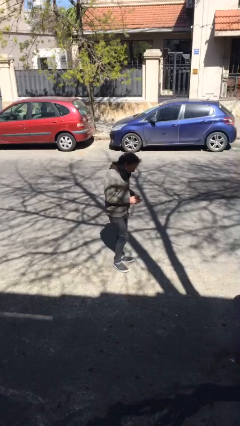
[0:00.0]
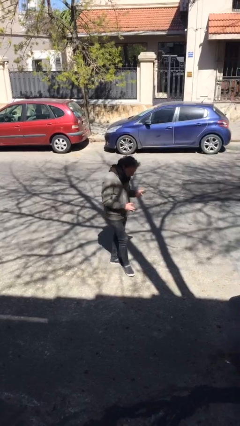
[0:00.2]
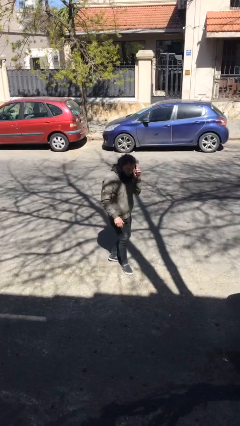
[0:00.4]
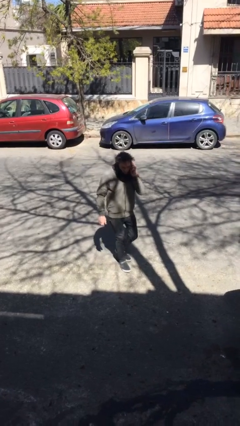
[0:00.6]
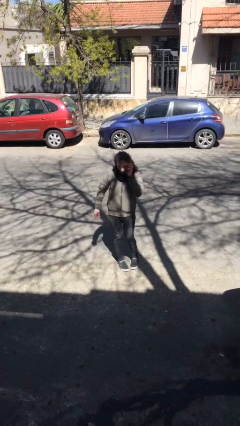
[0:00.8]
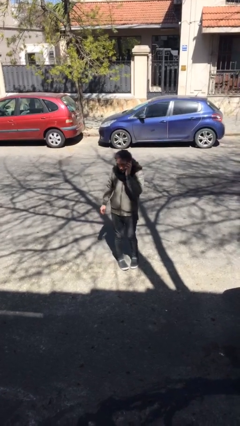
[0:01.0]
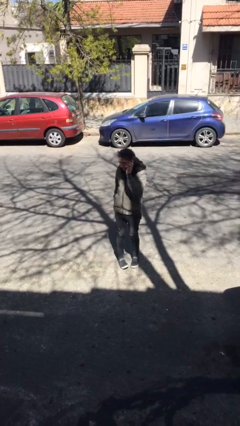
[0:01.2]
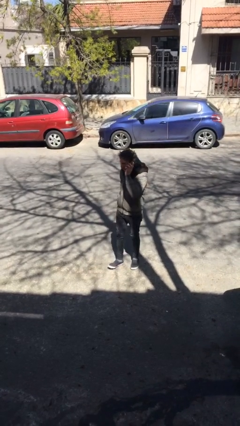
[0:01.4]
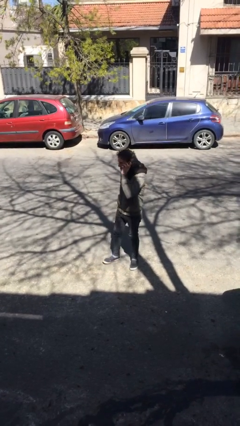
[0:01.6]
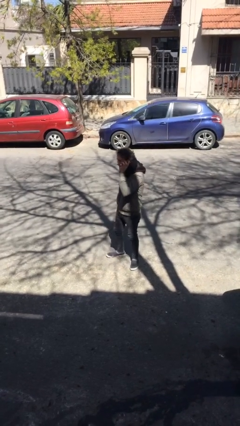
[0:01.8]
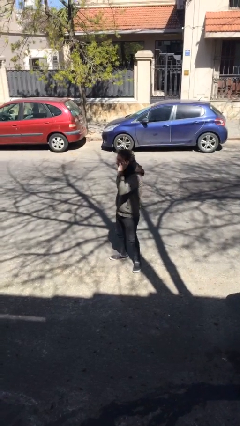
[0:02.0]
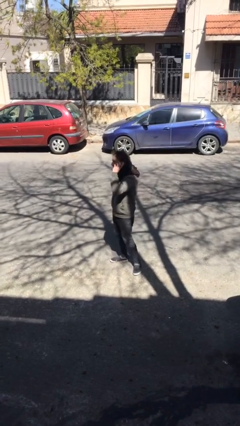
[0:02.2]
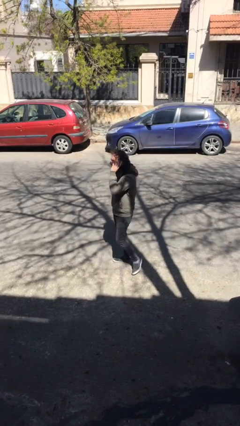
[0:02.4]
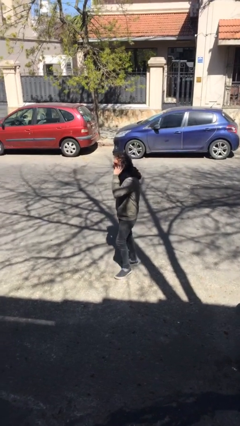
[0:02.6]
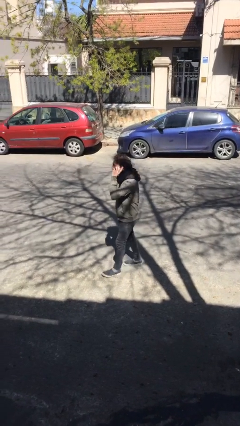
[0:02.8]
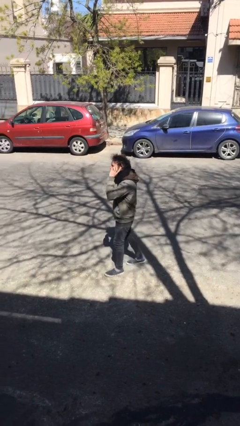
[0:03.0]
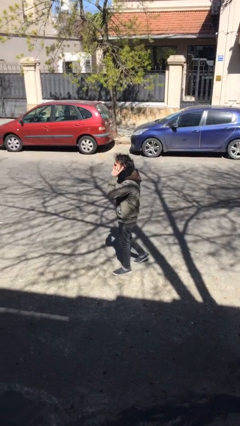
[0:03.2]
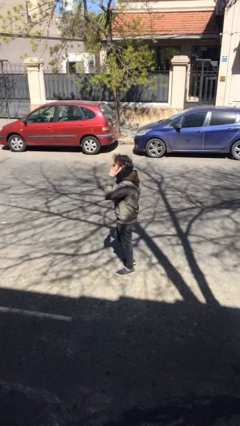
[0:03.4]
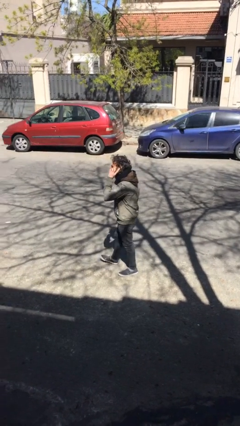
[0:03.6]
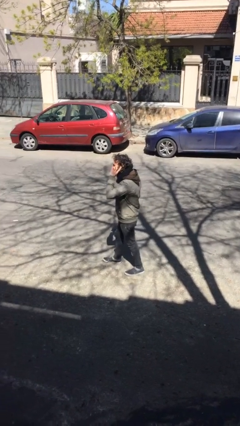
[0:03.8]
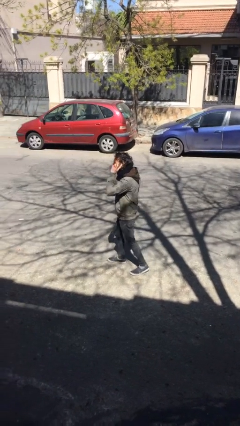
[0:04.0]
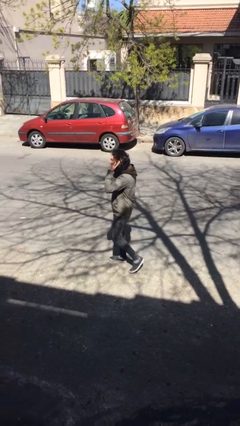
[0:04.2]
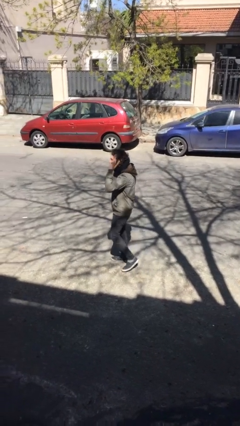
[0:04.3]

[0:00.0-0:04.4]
person talks on phone

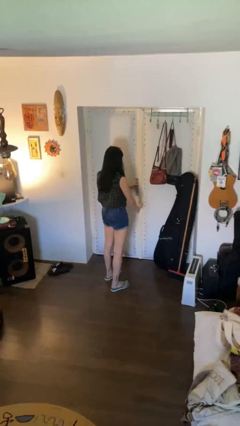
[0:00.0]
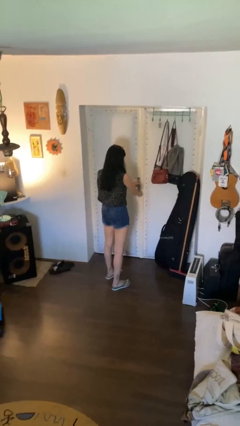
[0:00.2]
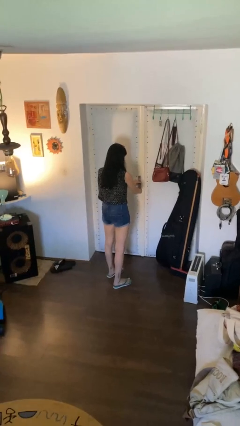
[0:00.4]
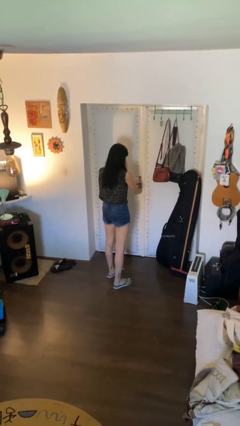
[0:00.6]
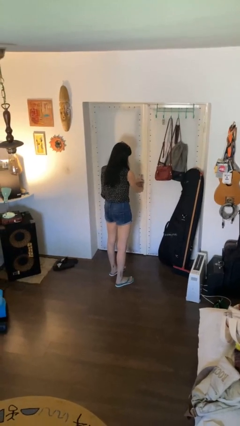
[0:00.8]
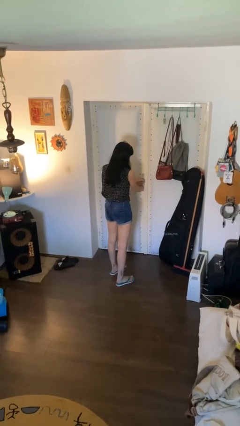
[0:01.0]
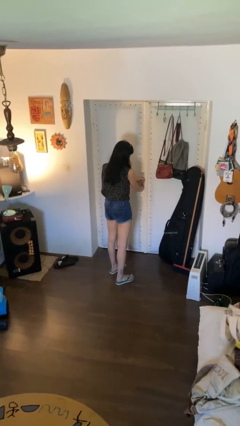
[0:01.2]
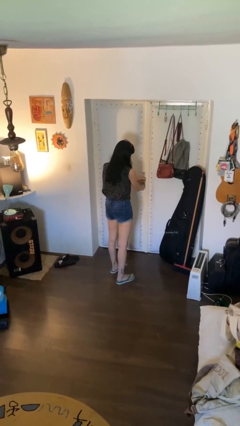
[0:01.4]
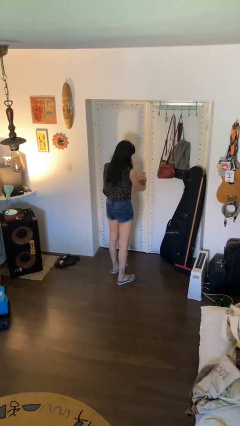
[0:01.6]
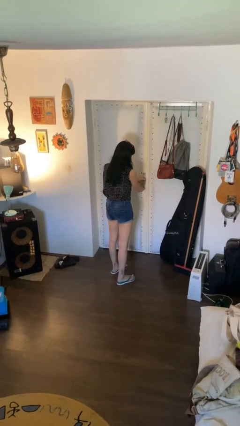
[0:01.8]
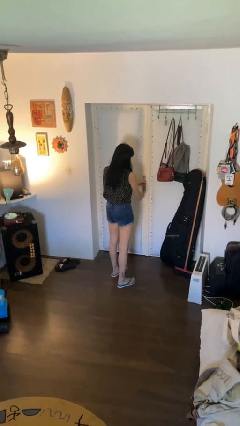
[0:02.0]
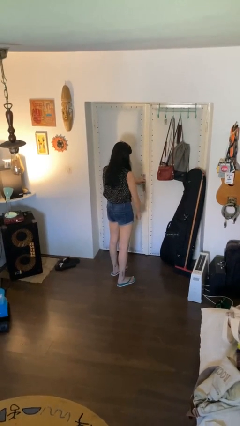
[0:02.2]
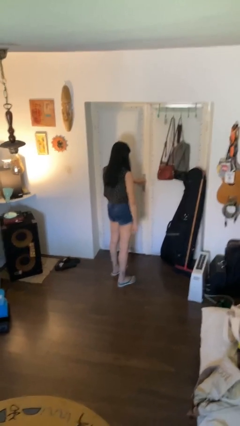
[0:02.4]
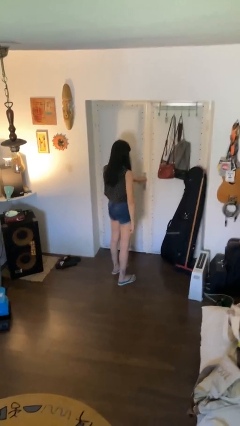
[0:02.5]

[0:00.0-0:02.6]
person locks door with keys

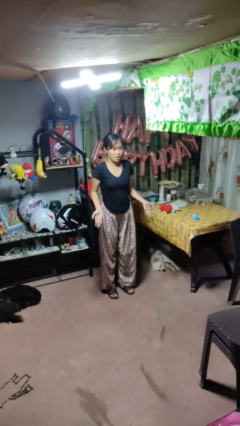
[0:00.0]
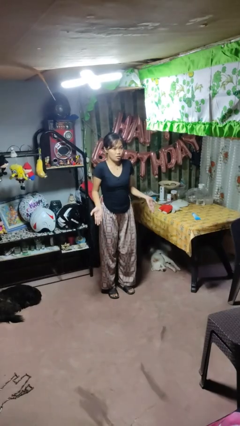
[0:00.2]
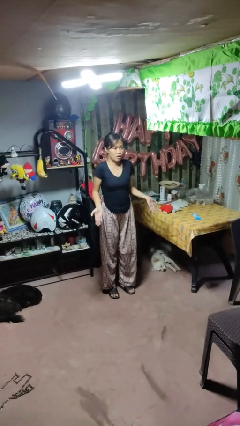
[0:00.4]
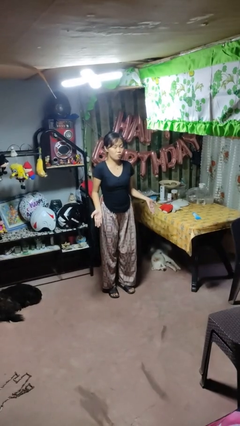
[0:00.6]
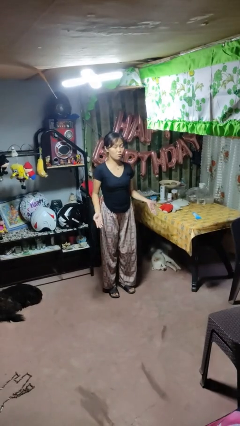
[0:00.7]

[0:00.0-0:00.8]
person shrugs

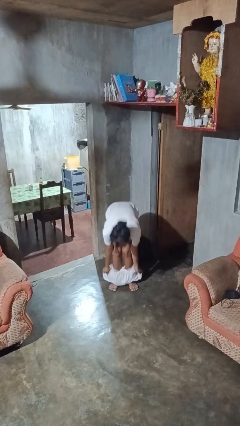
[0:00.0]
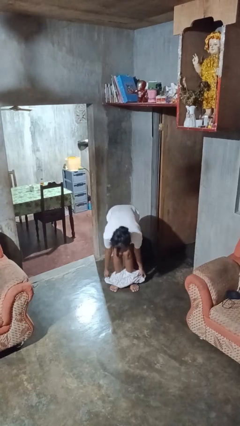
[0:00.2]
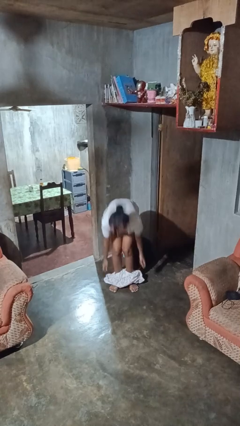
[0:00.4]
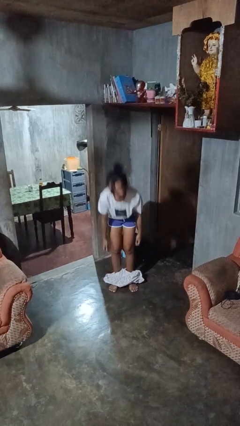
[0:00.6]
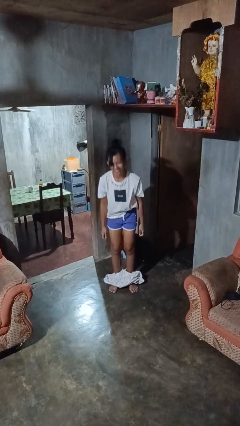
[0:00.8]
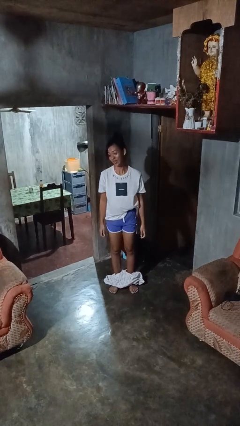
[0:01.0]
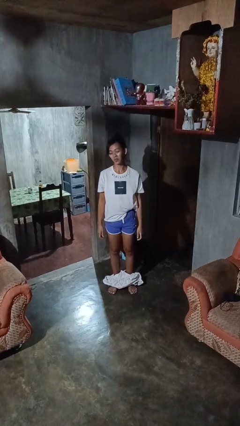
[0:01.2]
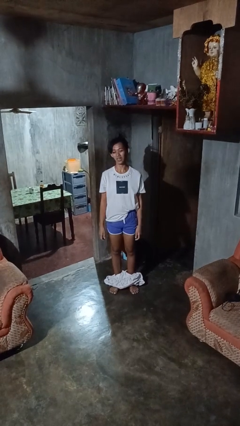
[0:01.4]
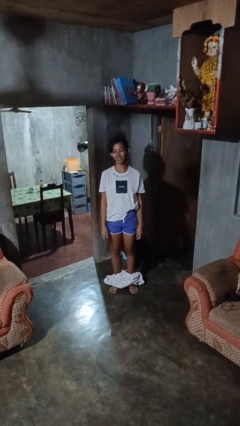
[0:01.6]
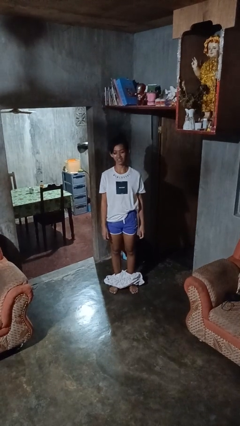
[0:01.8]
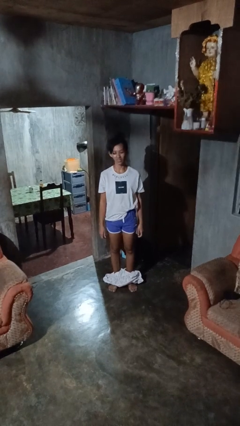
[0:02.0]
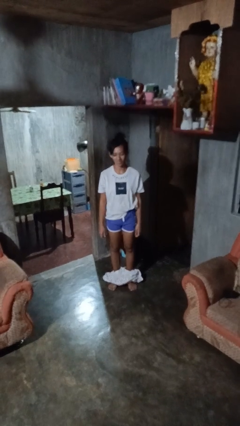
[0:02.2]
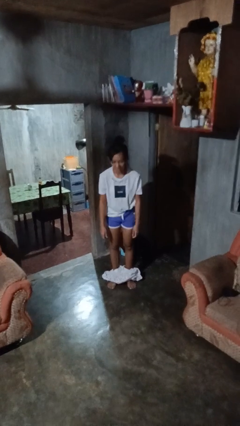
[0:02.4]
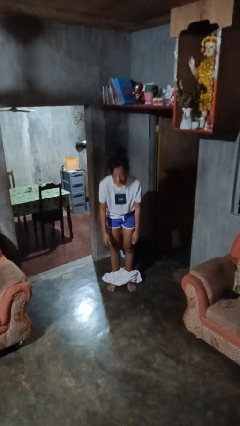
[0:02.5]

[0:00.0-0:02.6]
person takes off pants

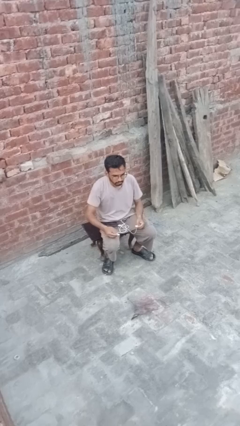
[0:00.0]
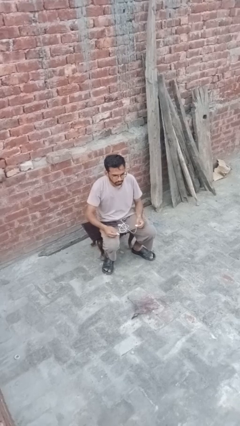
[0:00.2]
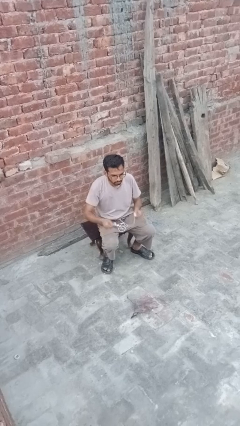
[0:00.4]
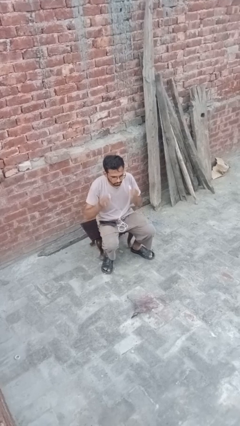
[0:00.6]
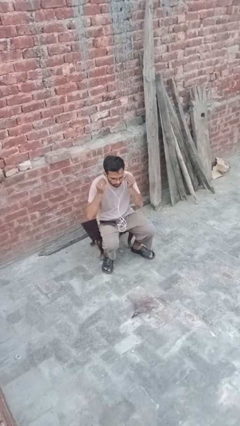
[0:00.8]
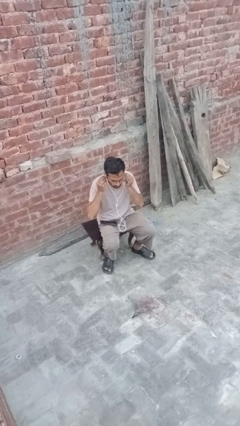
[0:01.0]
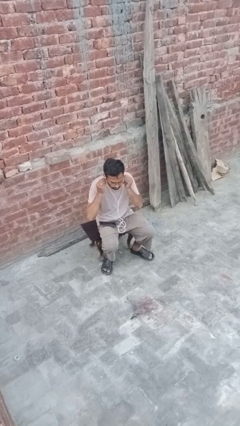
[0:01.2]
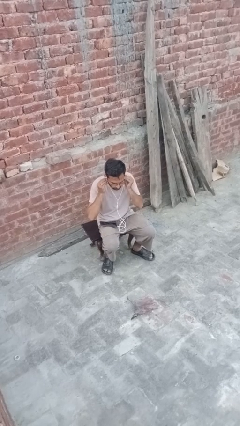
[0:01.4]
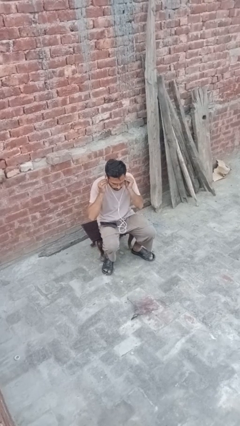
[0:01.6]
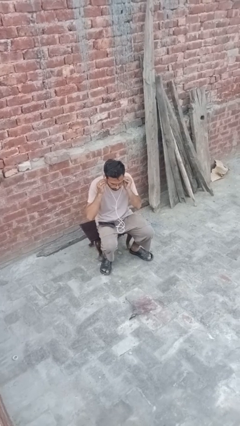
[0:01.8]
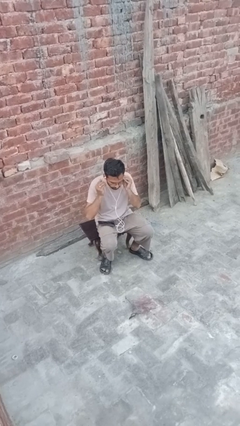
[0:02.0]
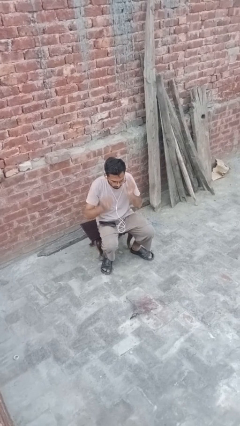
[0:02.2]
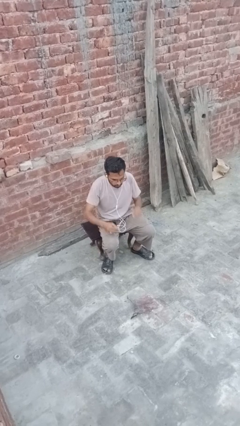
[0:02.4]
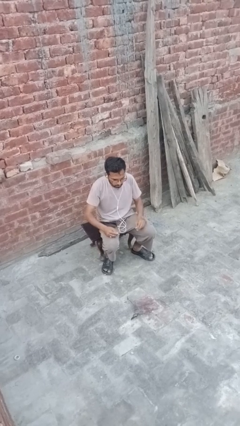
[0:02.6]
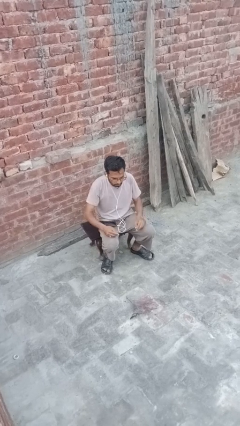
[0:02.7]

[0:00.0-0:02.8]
person puts on headphones

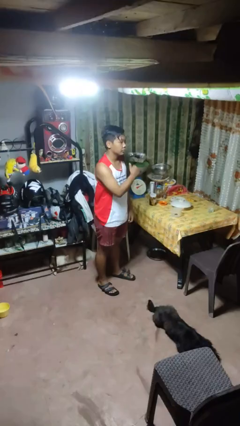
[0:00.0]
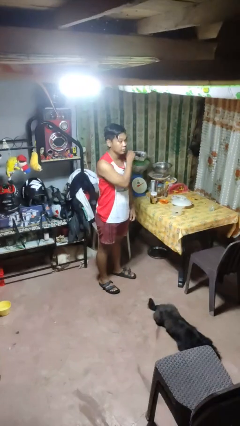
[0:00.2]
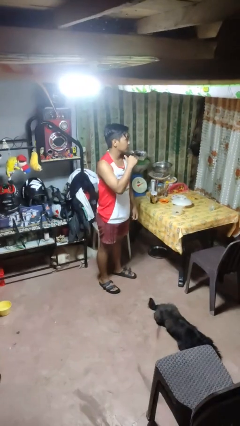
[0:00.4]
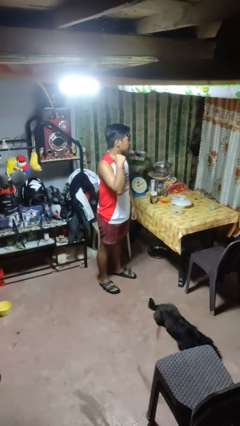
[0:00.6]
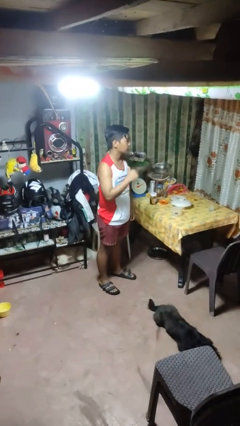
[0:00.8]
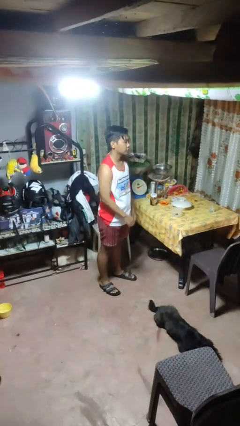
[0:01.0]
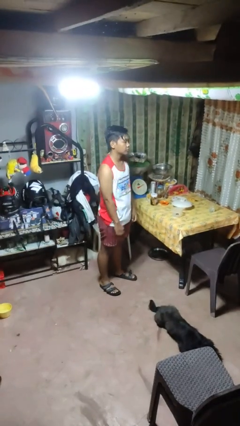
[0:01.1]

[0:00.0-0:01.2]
person gestures cut

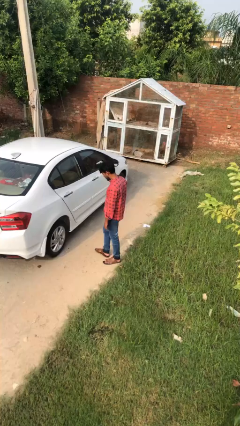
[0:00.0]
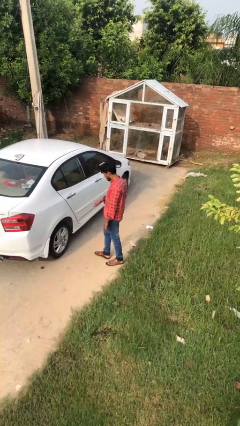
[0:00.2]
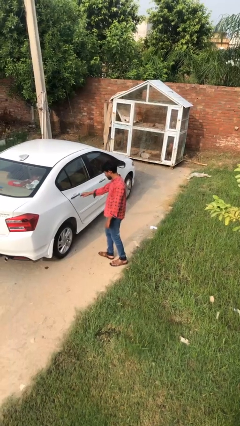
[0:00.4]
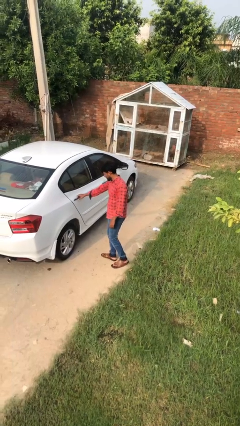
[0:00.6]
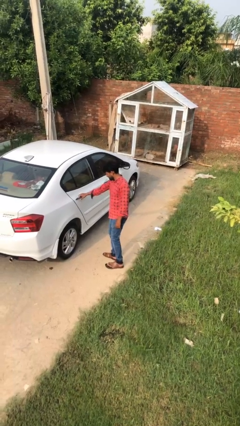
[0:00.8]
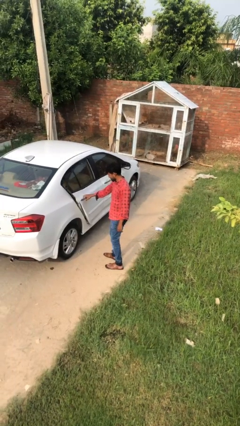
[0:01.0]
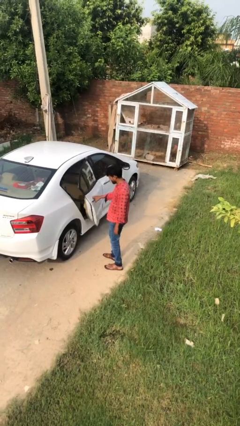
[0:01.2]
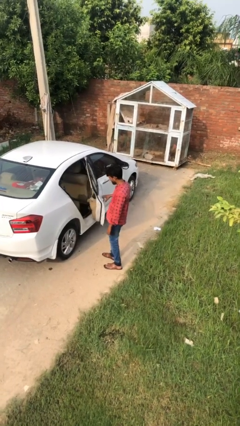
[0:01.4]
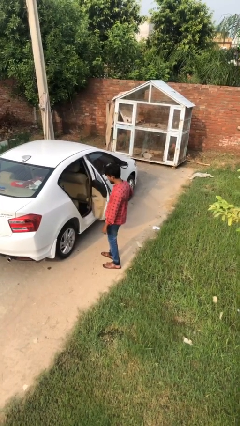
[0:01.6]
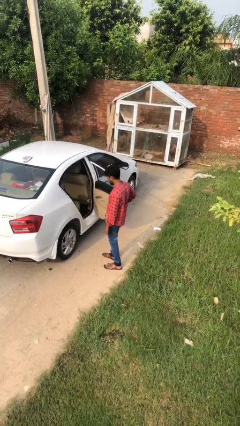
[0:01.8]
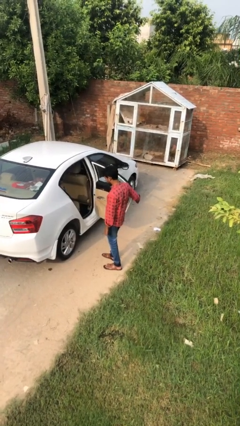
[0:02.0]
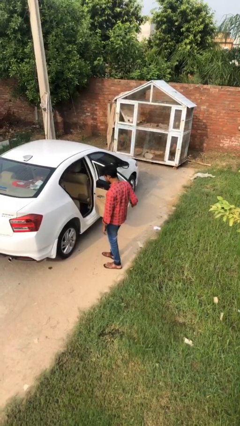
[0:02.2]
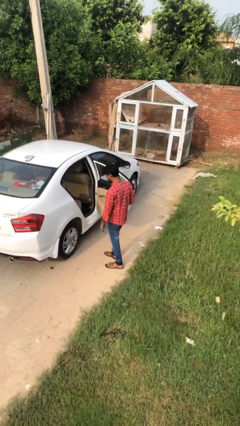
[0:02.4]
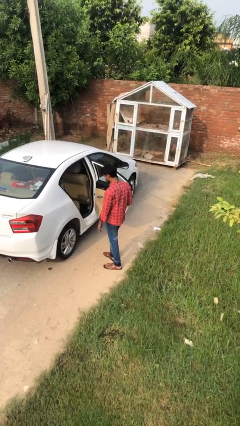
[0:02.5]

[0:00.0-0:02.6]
person opens car door
